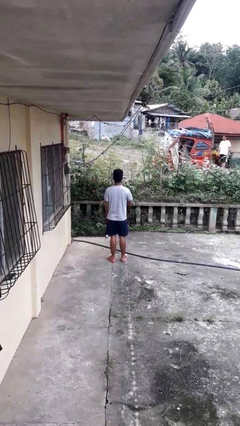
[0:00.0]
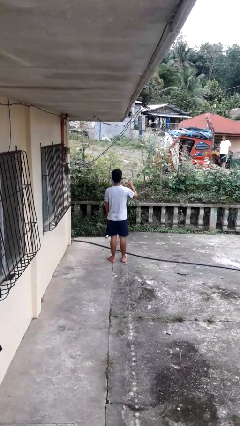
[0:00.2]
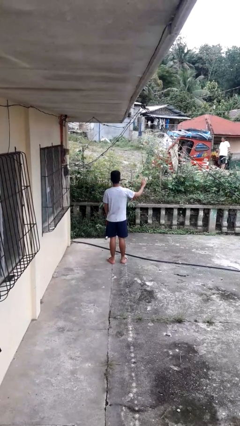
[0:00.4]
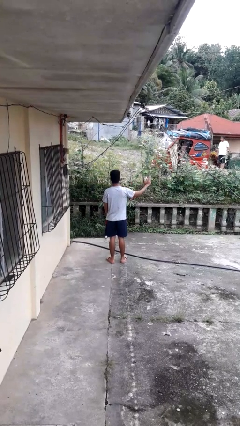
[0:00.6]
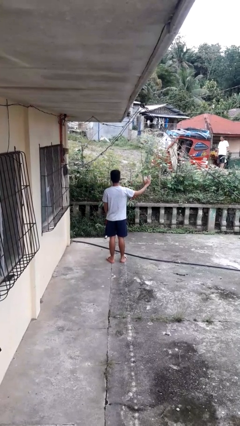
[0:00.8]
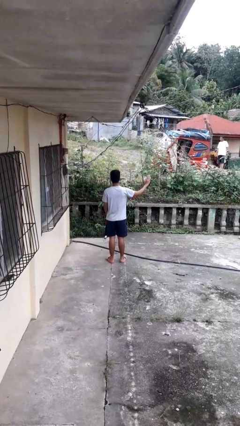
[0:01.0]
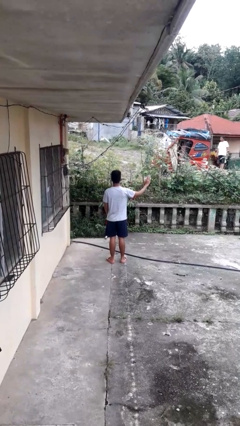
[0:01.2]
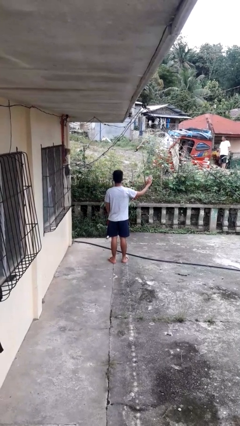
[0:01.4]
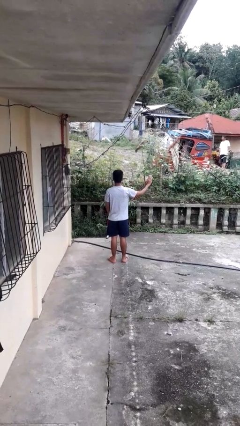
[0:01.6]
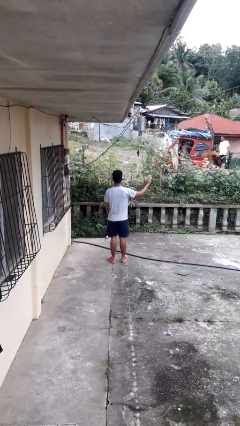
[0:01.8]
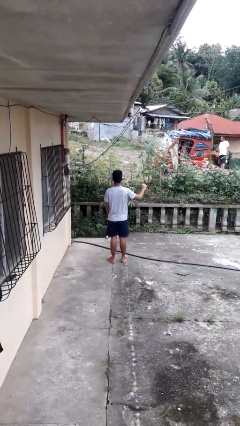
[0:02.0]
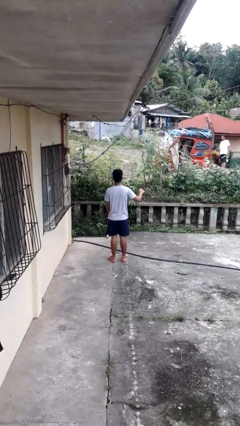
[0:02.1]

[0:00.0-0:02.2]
person gestures swipe right

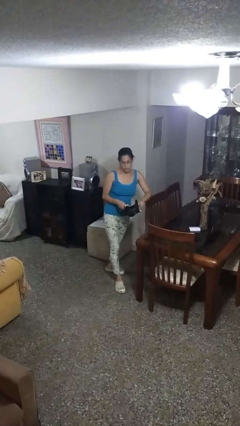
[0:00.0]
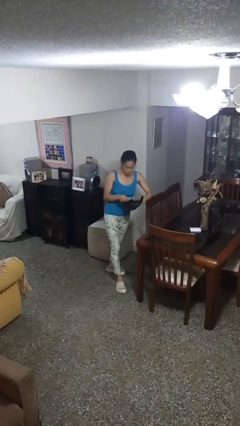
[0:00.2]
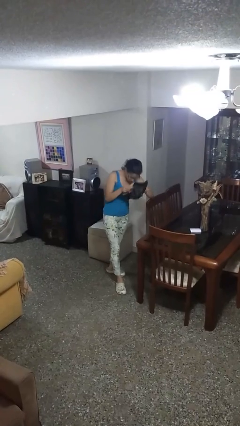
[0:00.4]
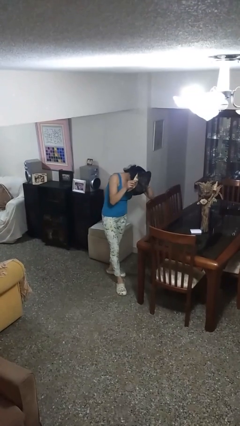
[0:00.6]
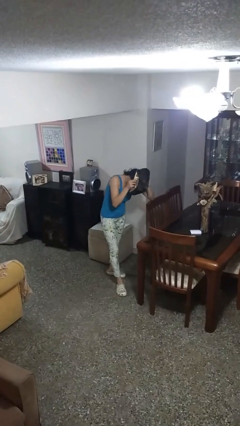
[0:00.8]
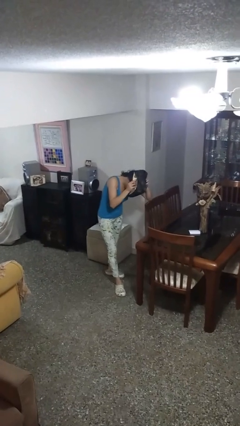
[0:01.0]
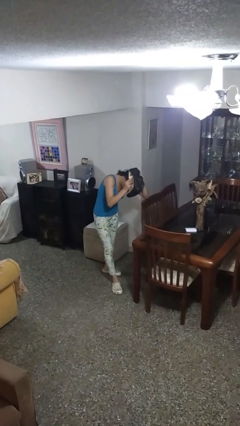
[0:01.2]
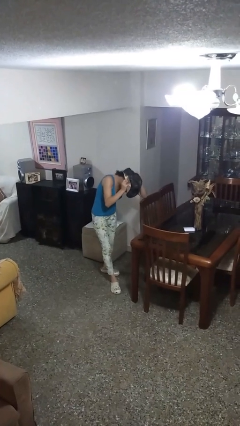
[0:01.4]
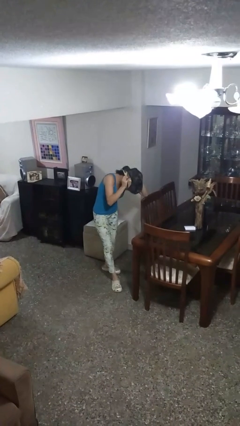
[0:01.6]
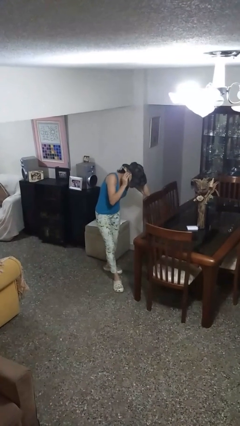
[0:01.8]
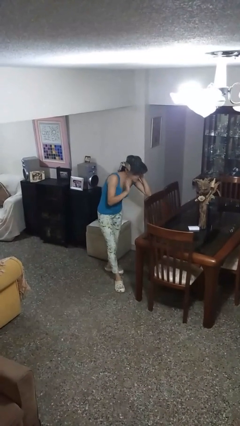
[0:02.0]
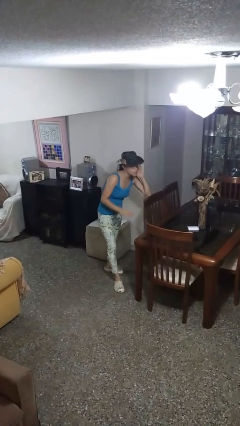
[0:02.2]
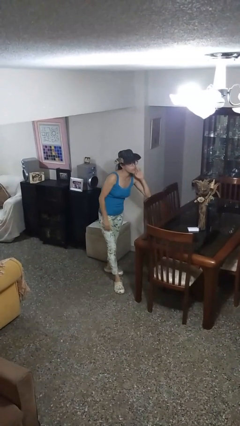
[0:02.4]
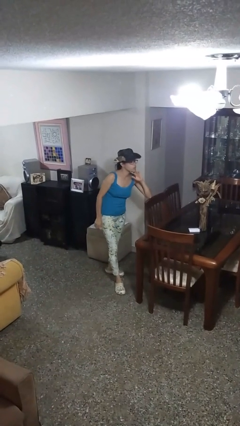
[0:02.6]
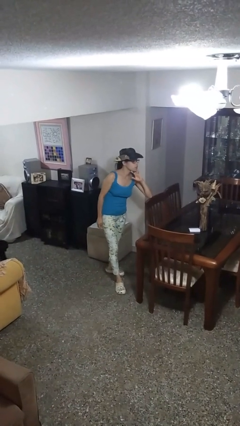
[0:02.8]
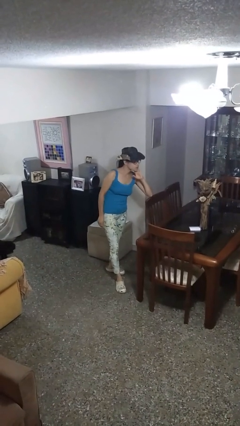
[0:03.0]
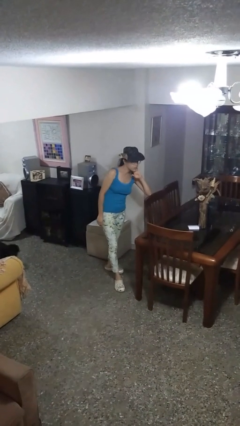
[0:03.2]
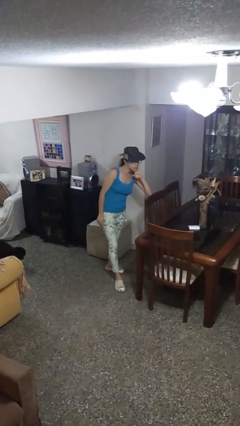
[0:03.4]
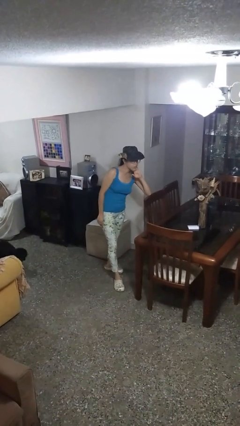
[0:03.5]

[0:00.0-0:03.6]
person puts on hat

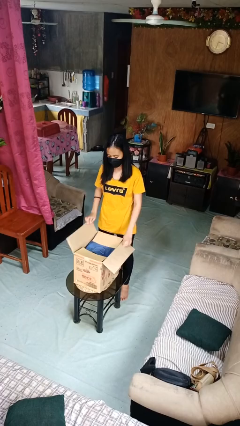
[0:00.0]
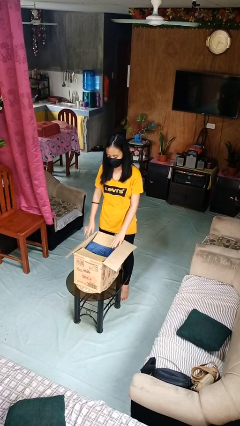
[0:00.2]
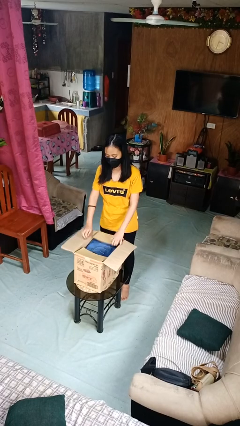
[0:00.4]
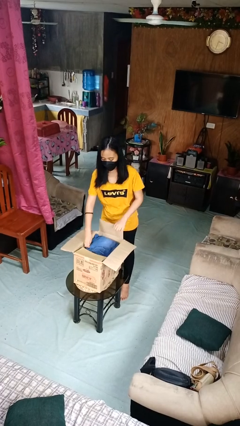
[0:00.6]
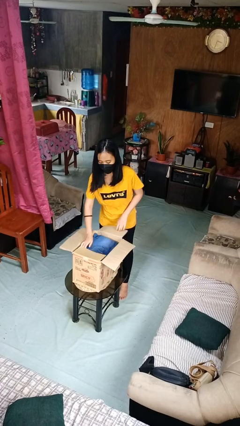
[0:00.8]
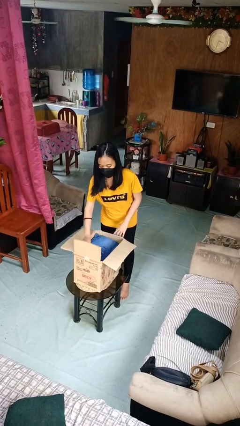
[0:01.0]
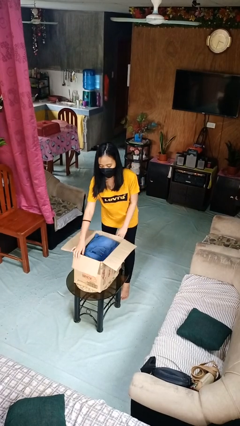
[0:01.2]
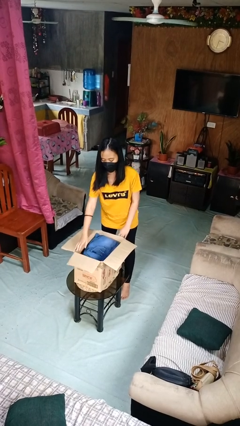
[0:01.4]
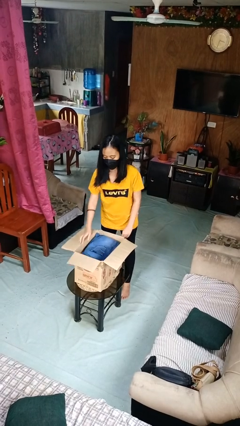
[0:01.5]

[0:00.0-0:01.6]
person opens box

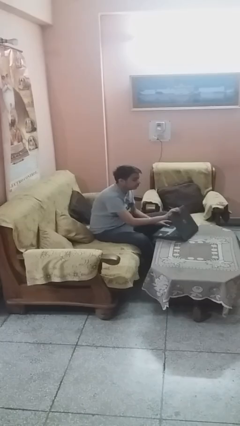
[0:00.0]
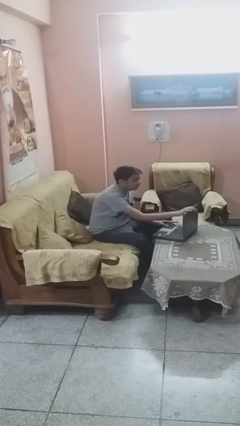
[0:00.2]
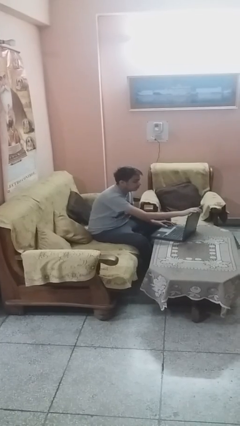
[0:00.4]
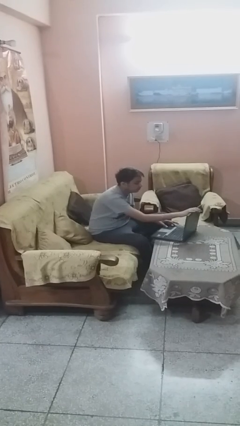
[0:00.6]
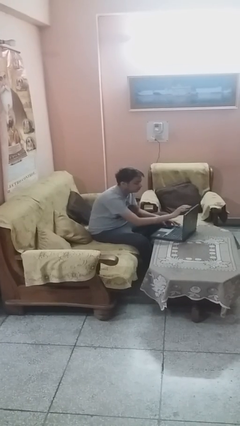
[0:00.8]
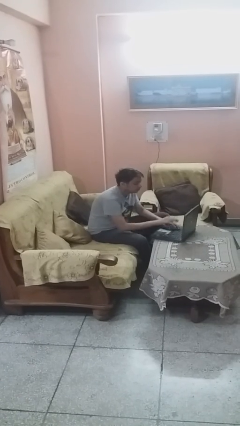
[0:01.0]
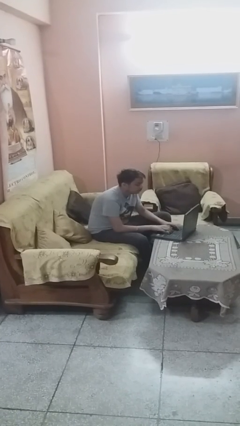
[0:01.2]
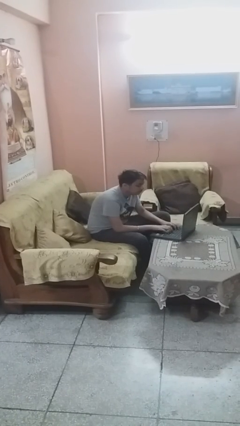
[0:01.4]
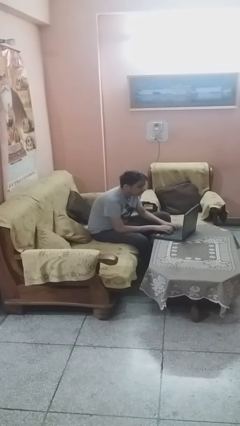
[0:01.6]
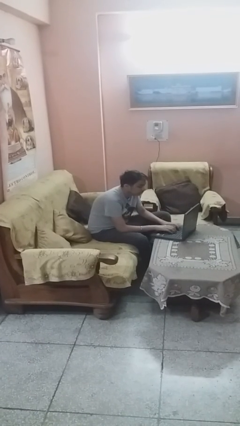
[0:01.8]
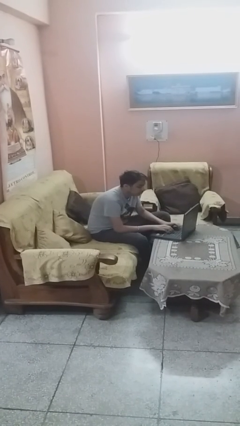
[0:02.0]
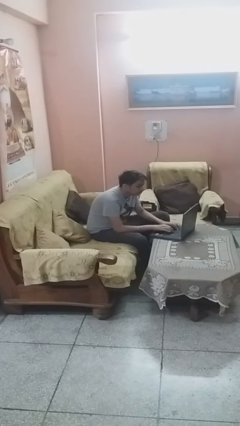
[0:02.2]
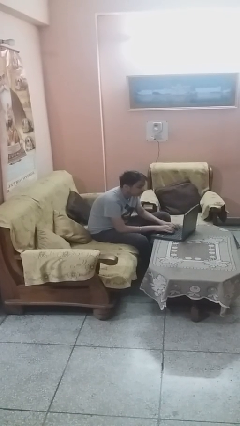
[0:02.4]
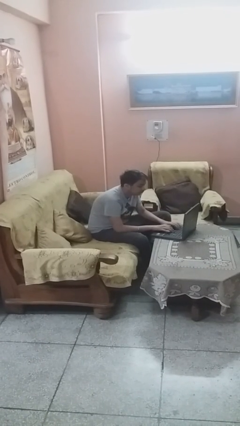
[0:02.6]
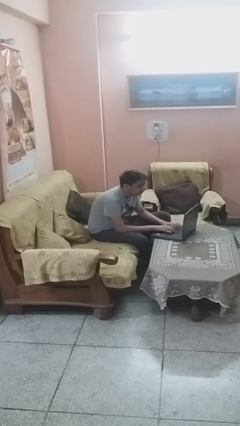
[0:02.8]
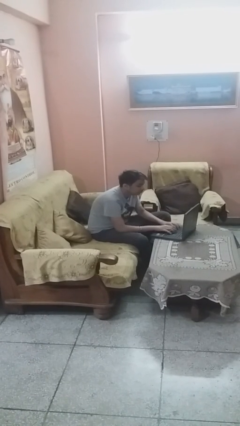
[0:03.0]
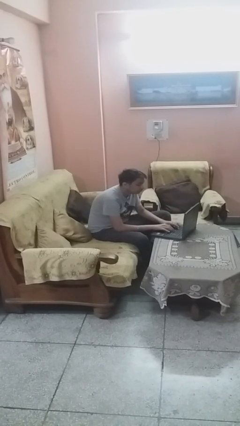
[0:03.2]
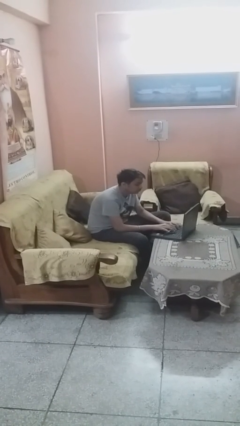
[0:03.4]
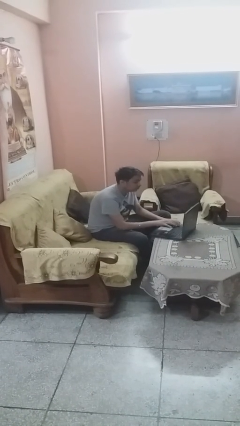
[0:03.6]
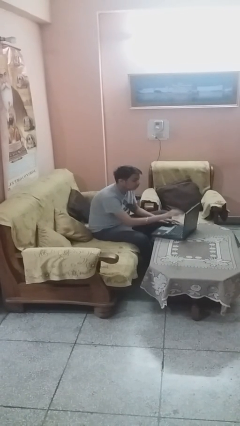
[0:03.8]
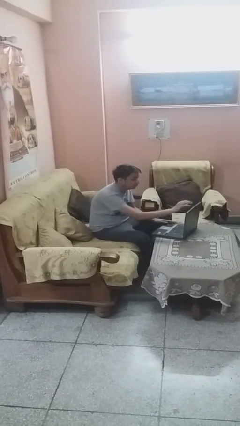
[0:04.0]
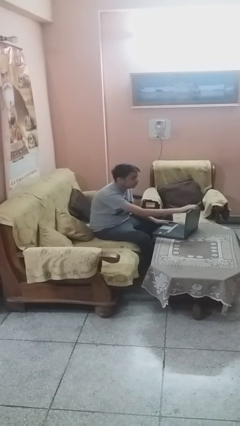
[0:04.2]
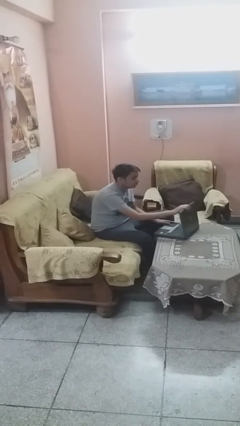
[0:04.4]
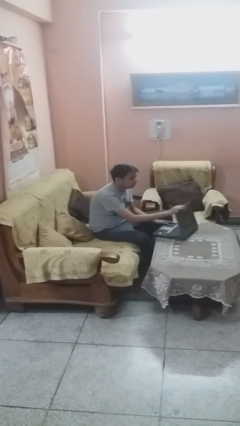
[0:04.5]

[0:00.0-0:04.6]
person interacts with laptop

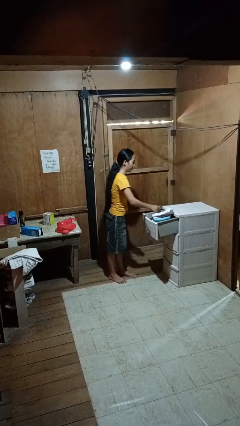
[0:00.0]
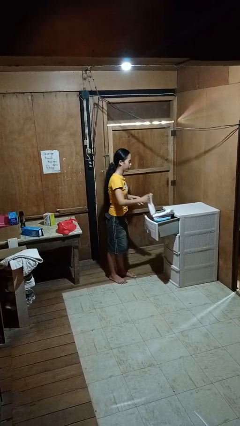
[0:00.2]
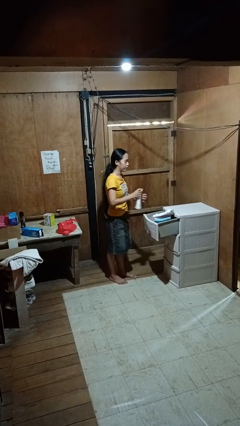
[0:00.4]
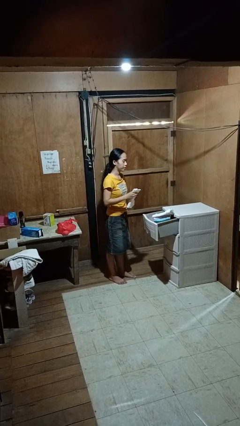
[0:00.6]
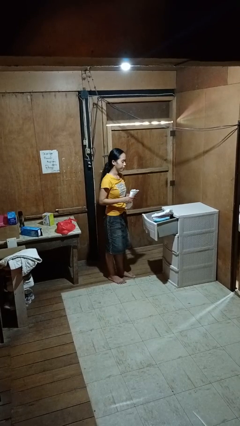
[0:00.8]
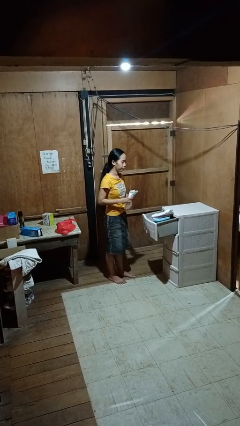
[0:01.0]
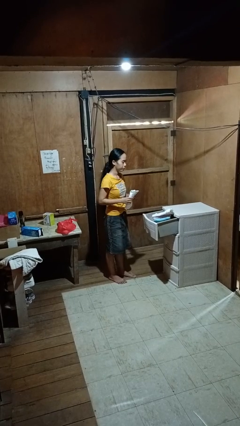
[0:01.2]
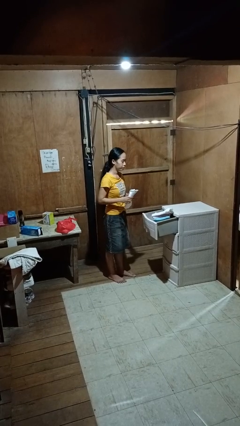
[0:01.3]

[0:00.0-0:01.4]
person takes clothes from dresser

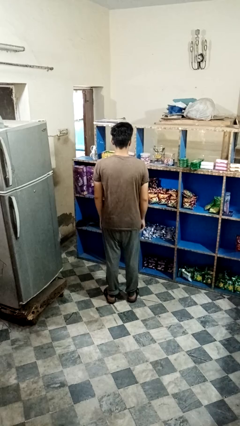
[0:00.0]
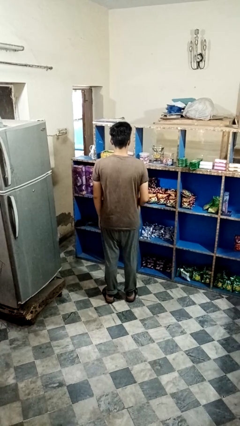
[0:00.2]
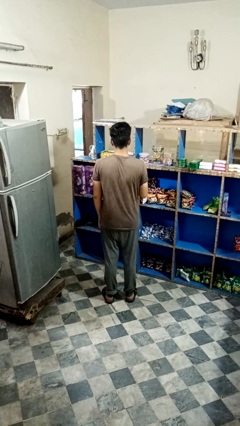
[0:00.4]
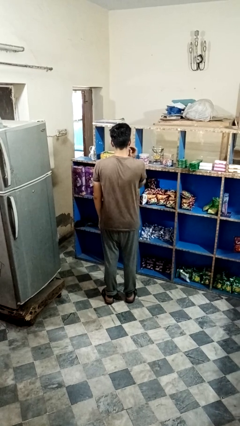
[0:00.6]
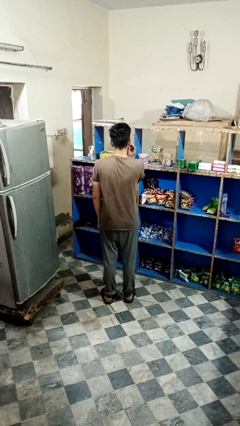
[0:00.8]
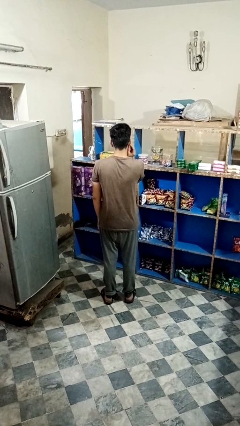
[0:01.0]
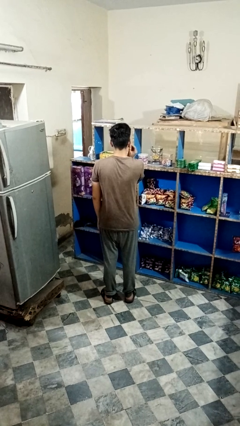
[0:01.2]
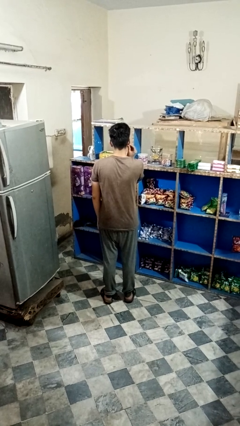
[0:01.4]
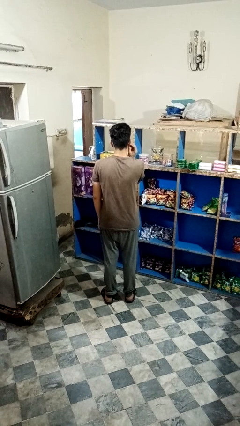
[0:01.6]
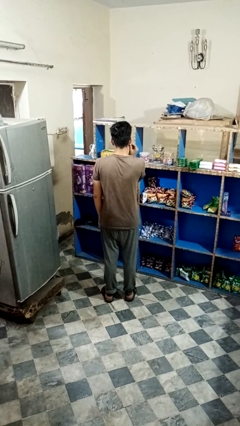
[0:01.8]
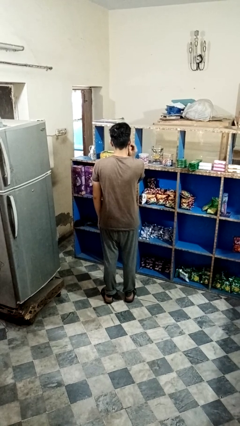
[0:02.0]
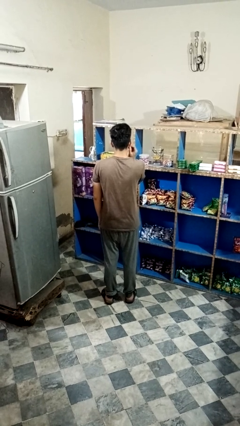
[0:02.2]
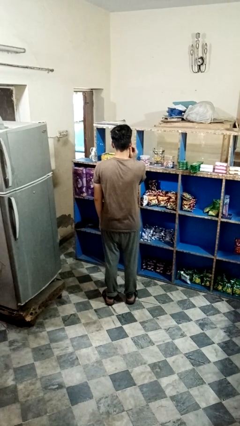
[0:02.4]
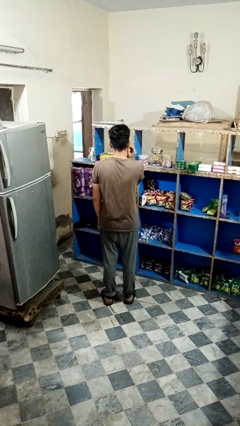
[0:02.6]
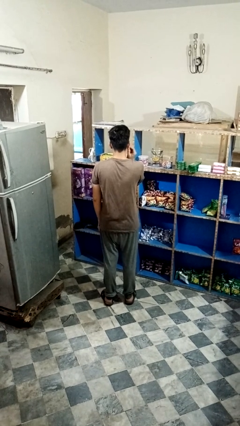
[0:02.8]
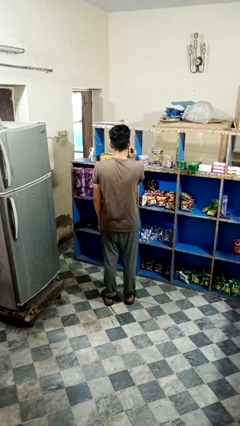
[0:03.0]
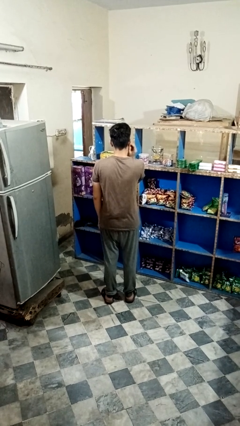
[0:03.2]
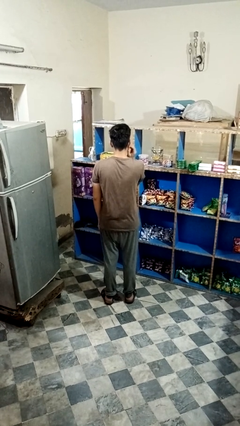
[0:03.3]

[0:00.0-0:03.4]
person touches earlobe

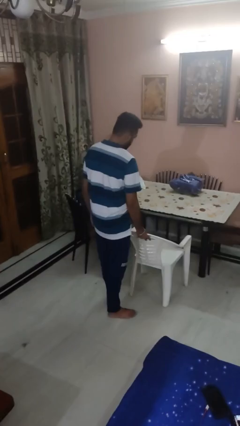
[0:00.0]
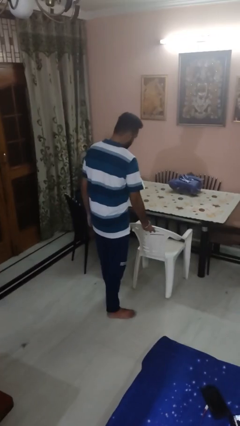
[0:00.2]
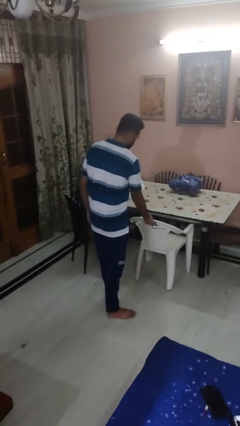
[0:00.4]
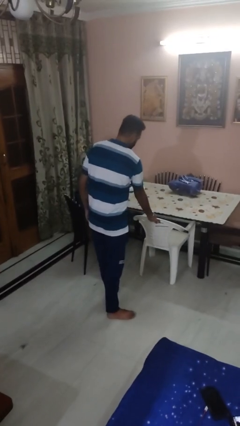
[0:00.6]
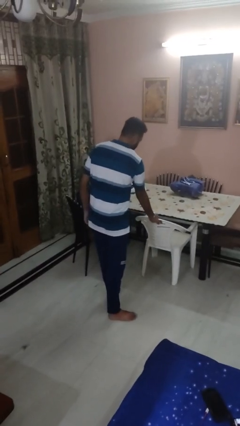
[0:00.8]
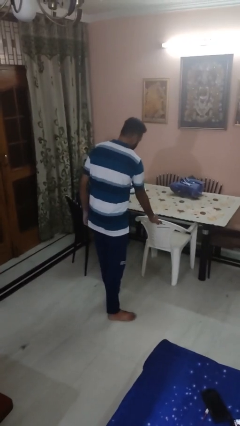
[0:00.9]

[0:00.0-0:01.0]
person pushes in chair
